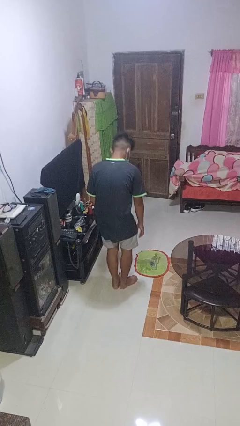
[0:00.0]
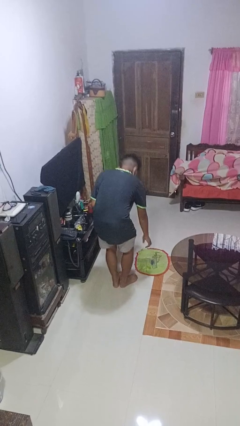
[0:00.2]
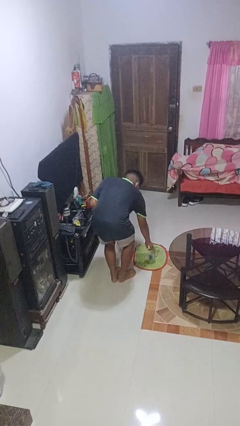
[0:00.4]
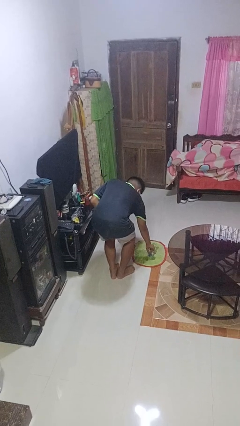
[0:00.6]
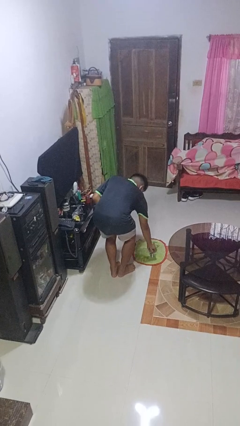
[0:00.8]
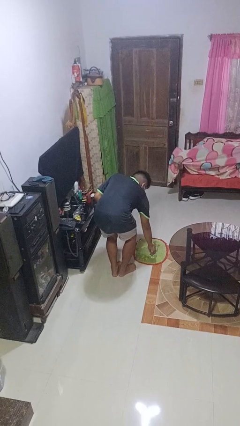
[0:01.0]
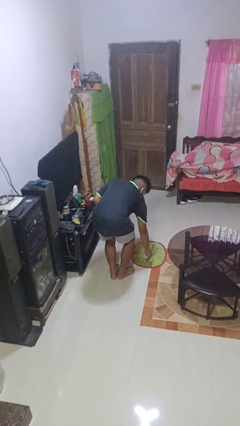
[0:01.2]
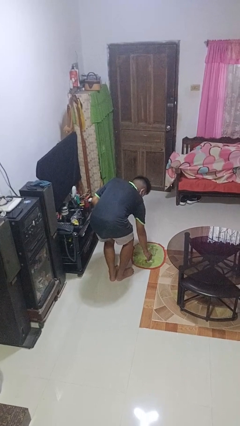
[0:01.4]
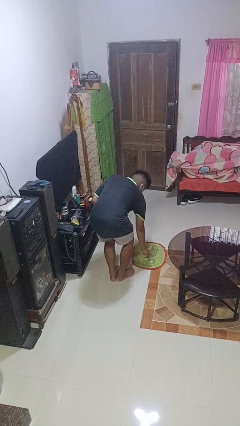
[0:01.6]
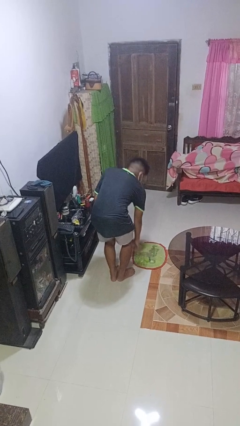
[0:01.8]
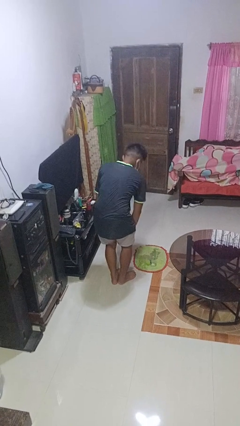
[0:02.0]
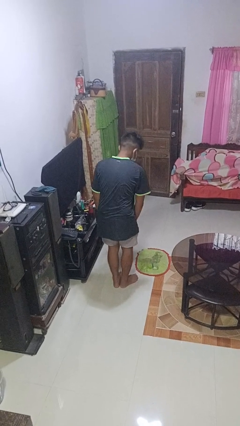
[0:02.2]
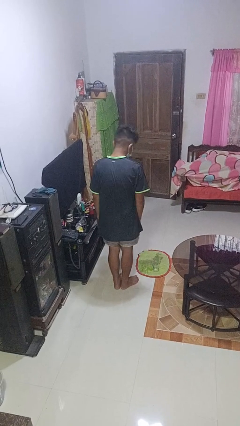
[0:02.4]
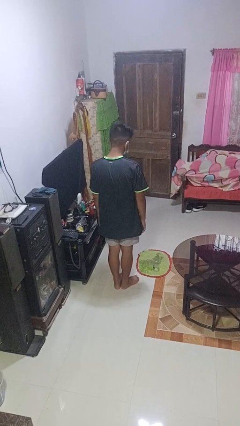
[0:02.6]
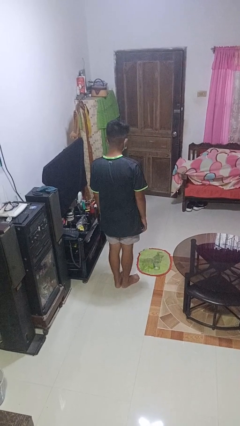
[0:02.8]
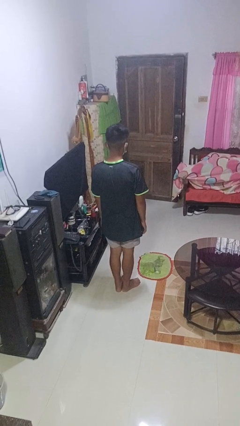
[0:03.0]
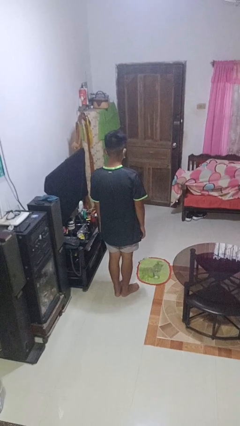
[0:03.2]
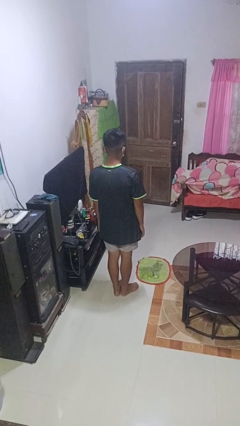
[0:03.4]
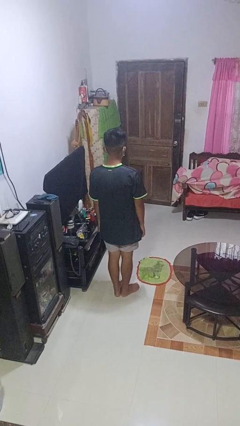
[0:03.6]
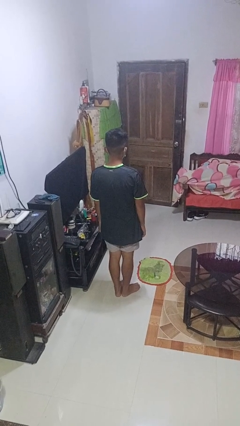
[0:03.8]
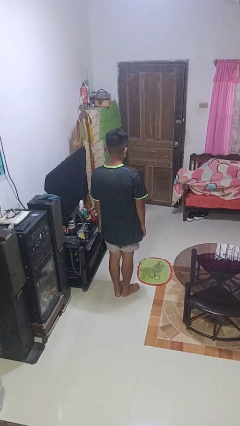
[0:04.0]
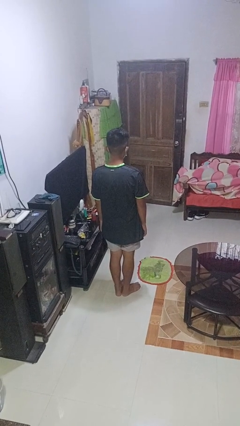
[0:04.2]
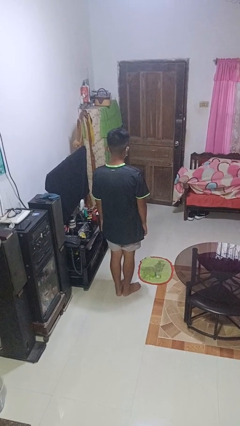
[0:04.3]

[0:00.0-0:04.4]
person sets upright glass

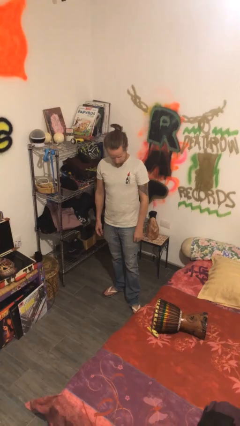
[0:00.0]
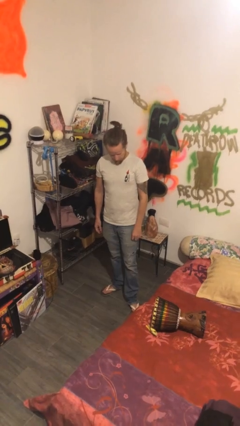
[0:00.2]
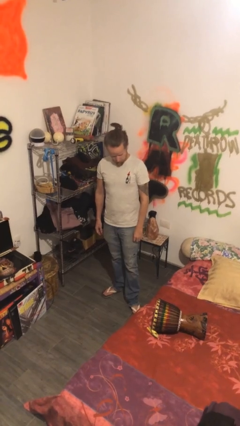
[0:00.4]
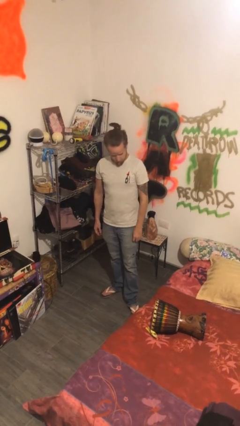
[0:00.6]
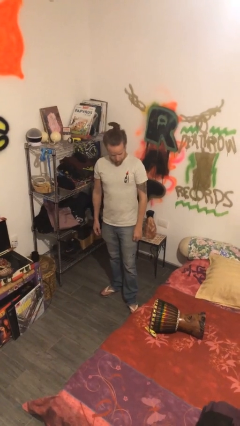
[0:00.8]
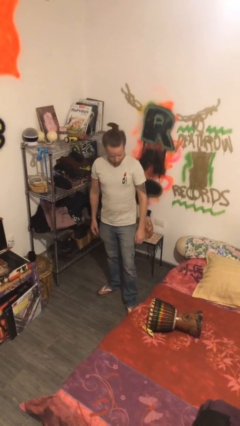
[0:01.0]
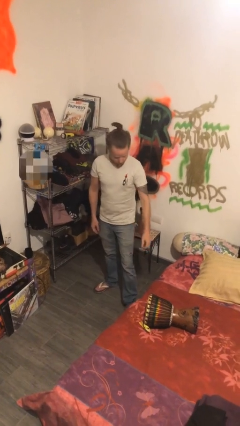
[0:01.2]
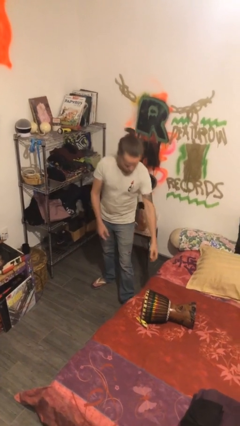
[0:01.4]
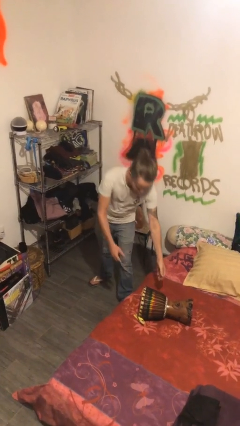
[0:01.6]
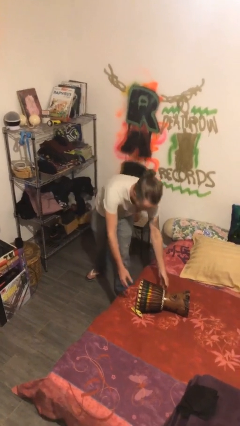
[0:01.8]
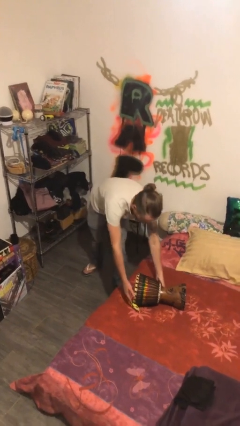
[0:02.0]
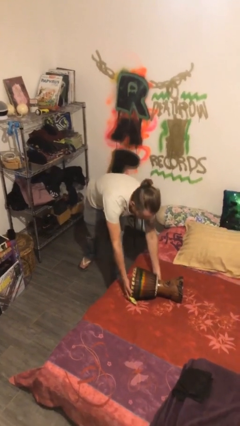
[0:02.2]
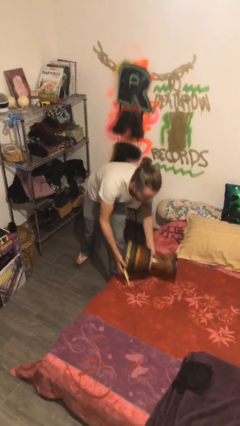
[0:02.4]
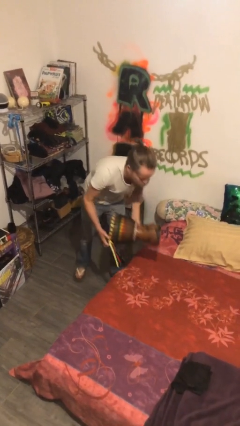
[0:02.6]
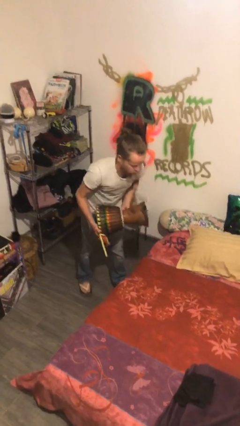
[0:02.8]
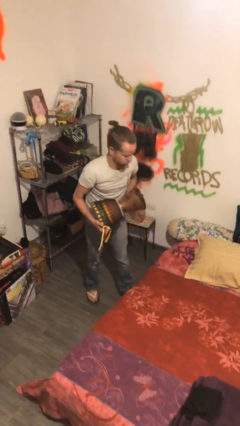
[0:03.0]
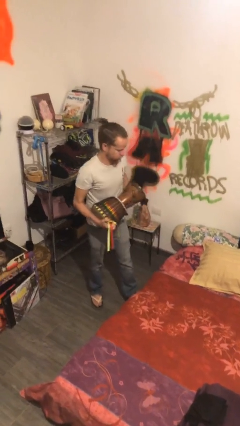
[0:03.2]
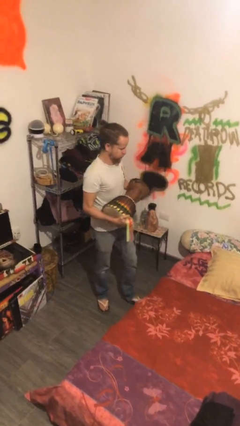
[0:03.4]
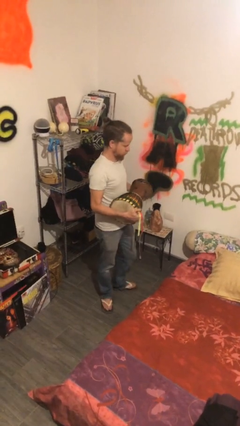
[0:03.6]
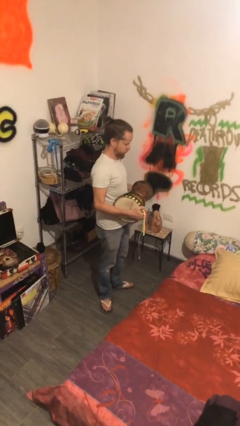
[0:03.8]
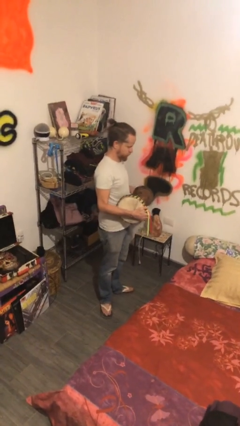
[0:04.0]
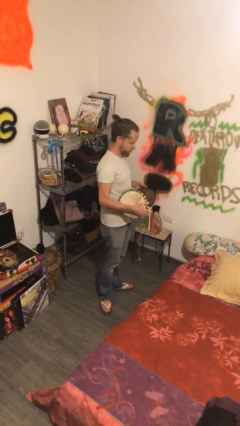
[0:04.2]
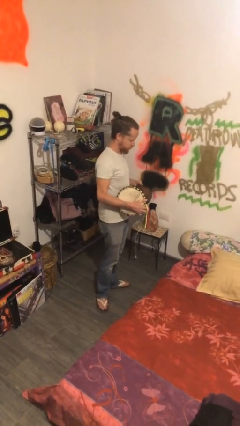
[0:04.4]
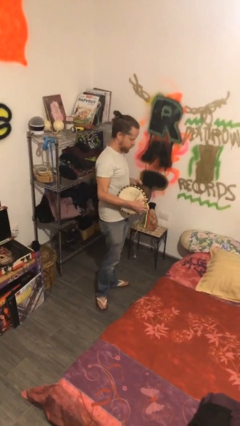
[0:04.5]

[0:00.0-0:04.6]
person picks up object from bed

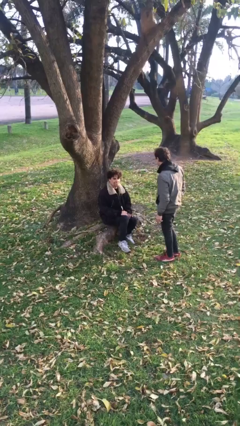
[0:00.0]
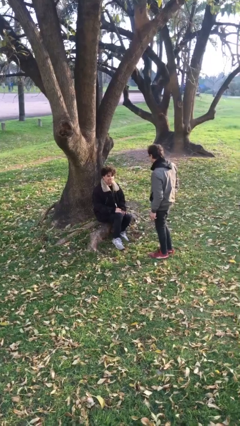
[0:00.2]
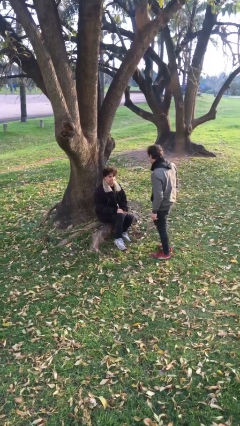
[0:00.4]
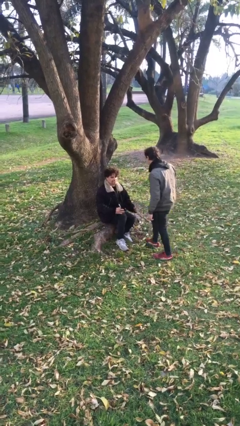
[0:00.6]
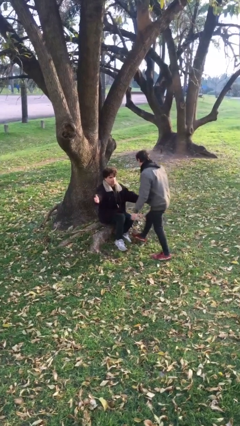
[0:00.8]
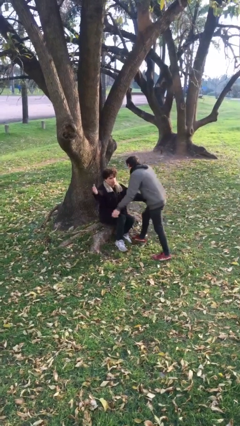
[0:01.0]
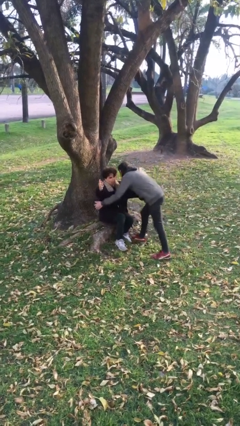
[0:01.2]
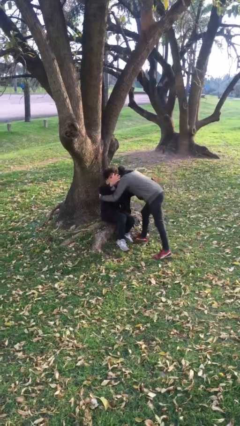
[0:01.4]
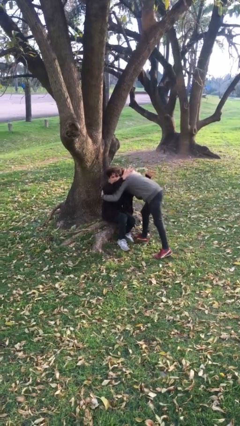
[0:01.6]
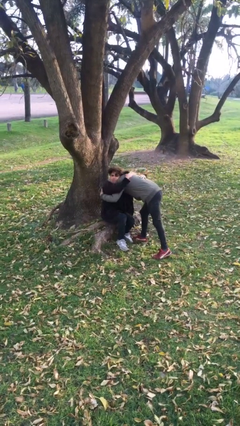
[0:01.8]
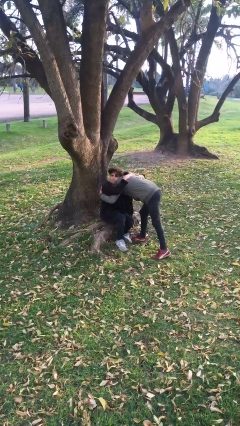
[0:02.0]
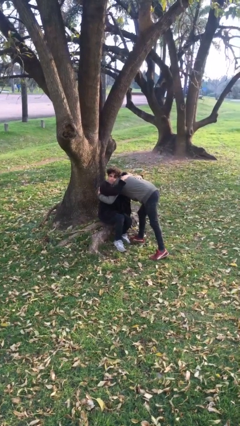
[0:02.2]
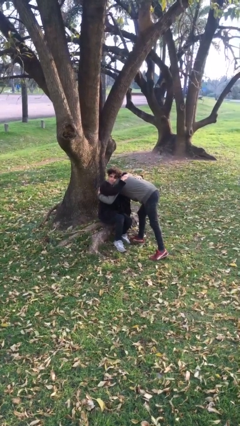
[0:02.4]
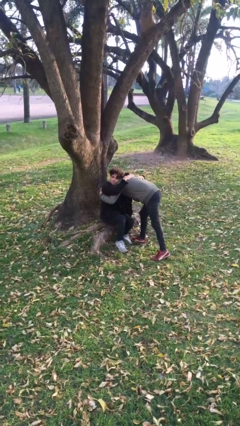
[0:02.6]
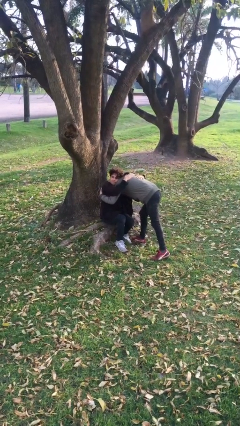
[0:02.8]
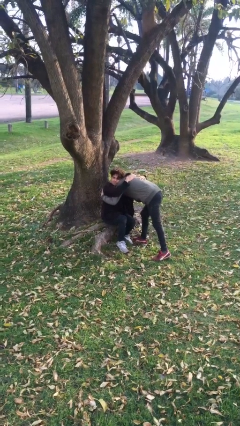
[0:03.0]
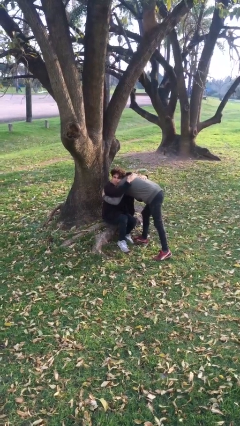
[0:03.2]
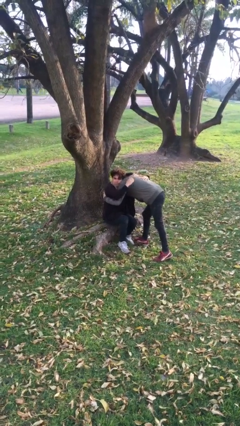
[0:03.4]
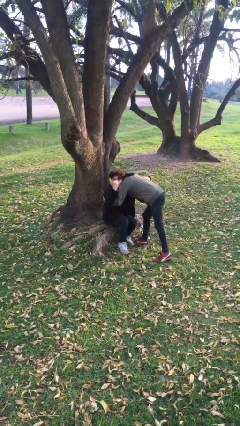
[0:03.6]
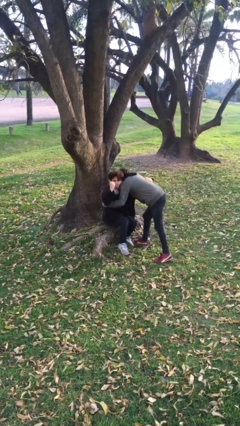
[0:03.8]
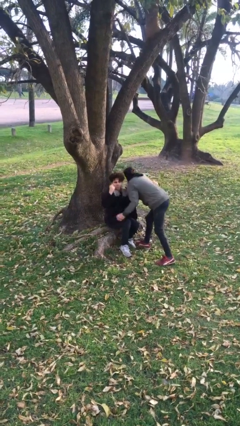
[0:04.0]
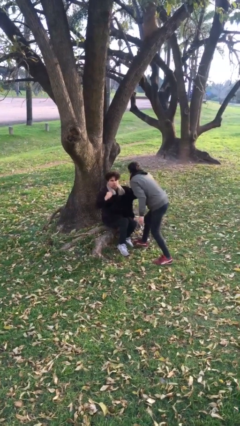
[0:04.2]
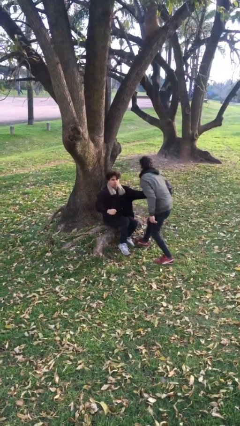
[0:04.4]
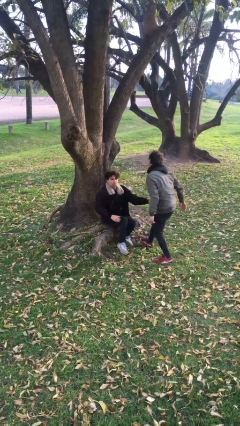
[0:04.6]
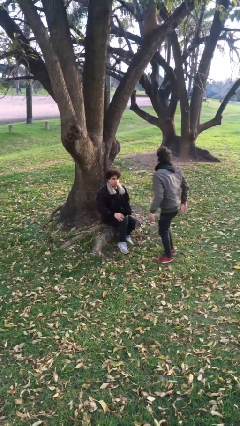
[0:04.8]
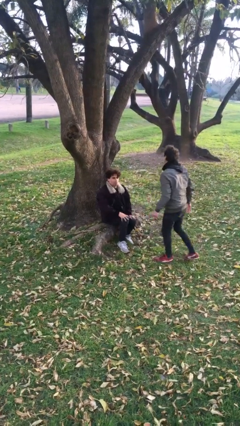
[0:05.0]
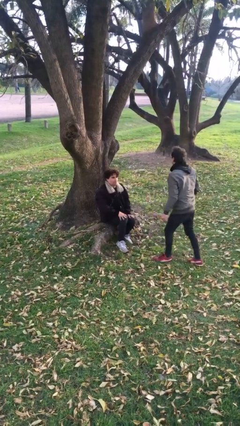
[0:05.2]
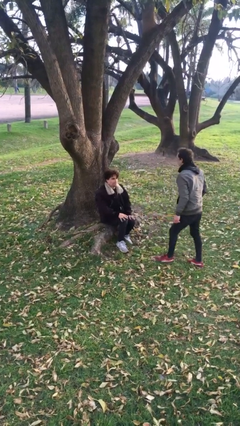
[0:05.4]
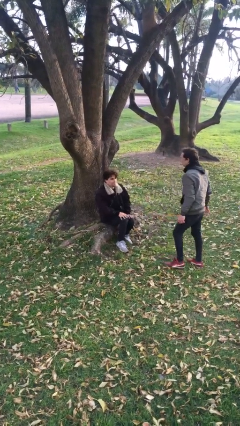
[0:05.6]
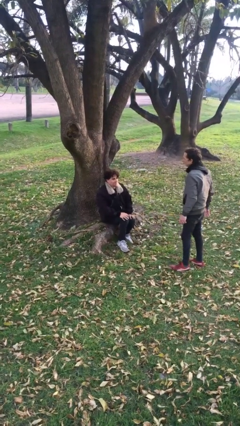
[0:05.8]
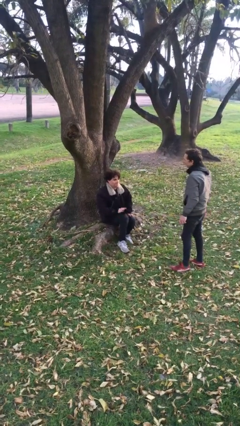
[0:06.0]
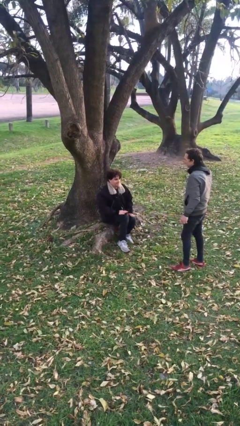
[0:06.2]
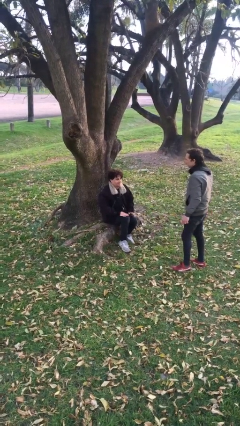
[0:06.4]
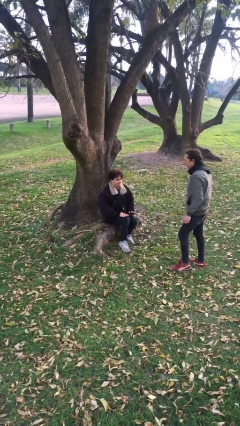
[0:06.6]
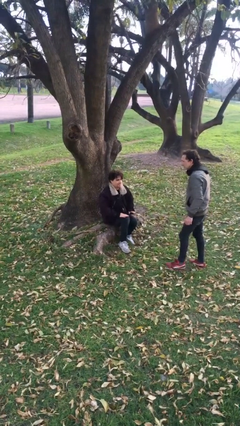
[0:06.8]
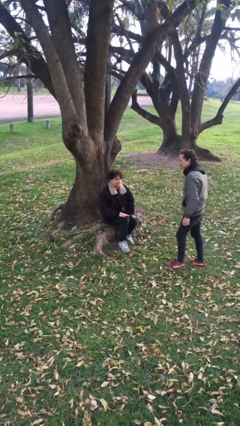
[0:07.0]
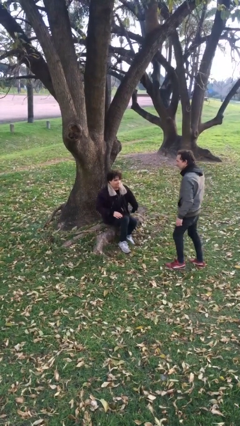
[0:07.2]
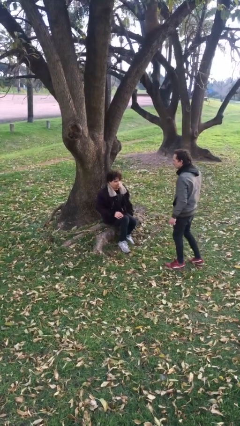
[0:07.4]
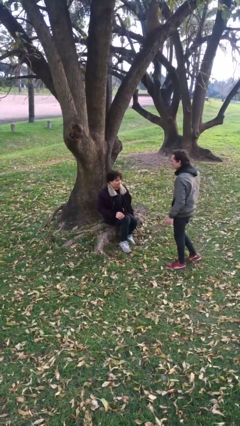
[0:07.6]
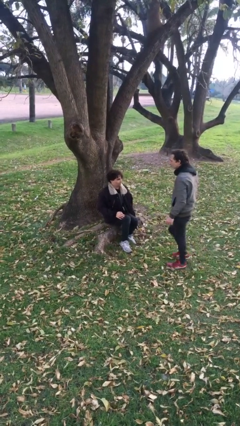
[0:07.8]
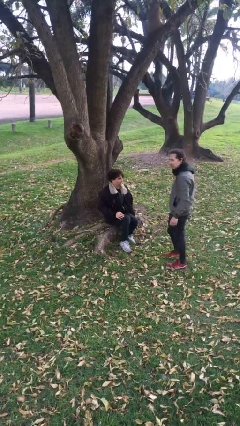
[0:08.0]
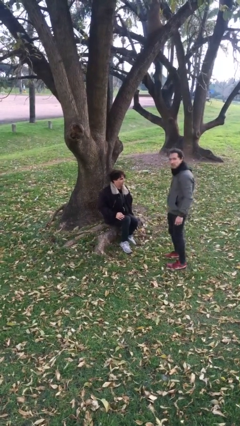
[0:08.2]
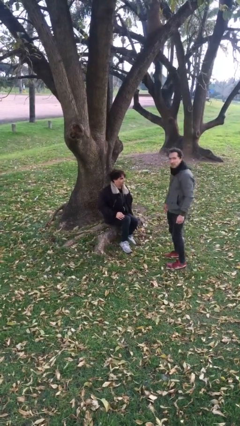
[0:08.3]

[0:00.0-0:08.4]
person embraces person

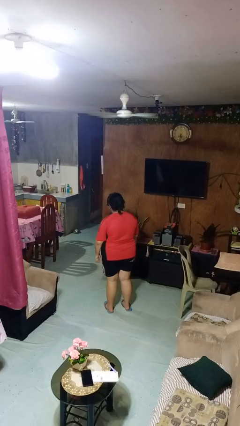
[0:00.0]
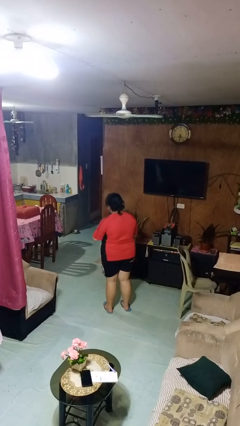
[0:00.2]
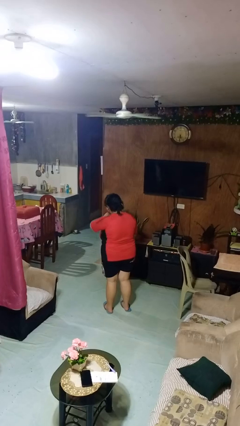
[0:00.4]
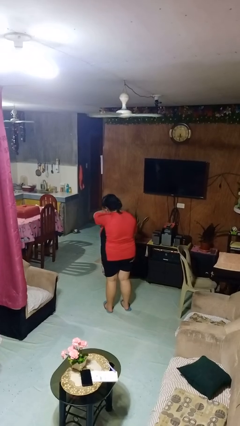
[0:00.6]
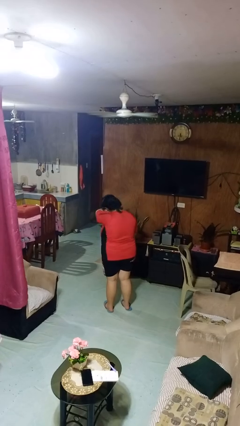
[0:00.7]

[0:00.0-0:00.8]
person sneezes into arm
